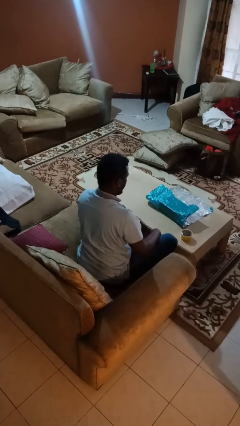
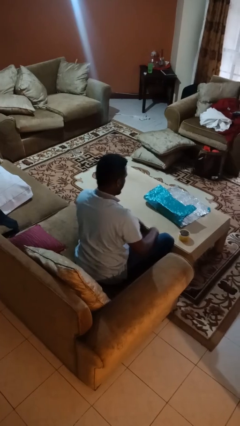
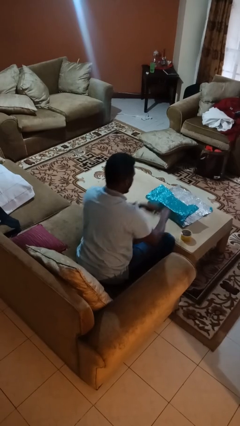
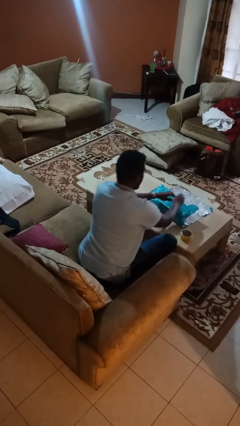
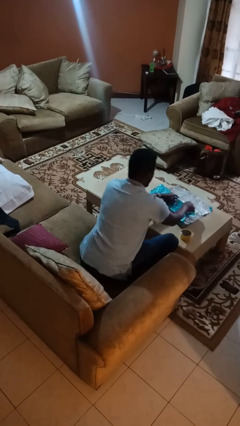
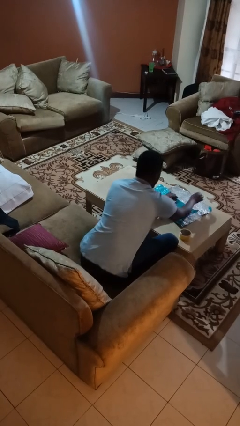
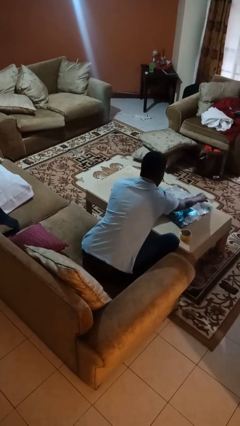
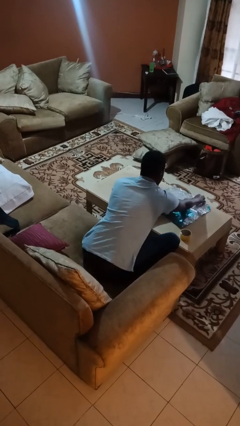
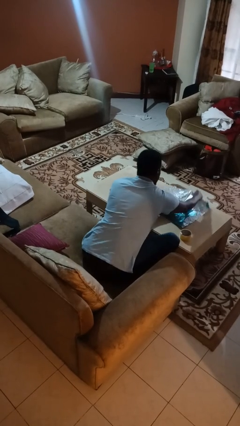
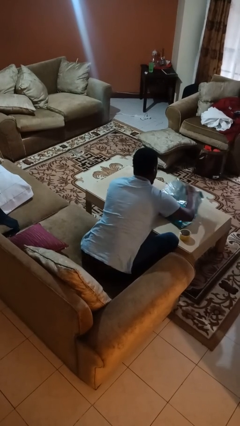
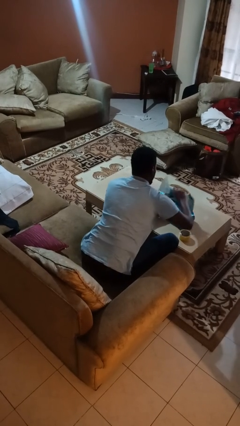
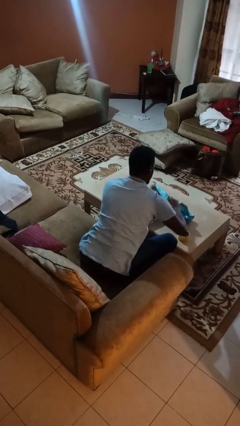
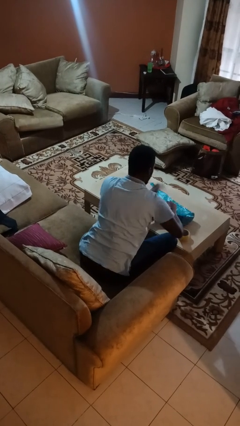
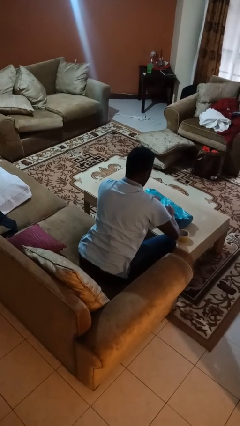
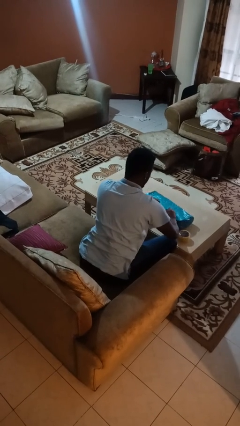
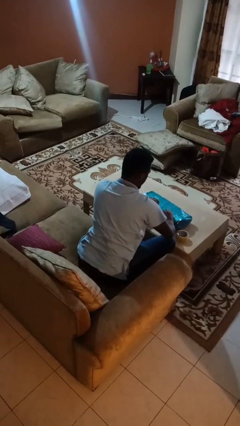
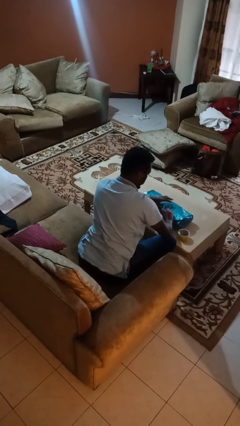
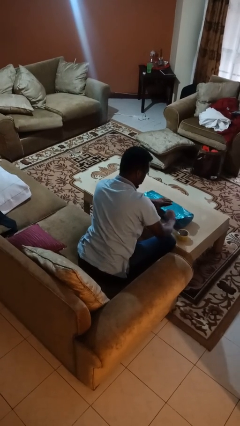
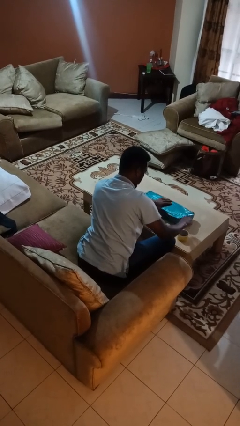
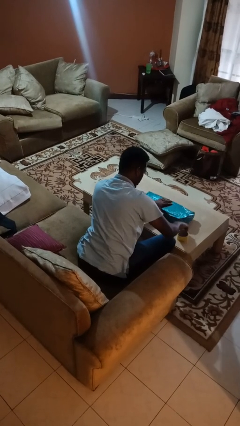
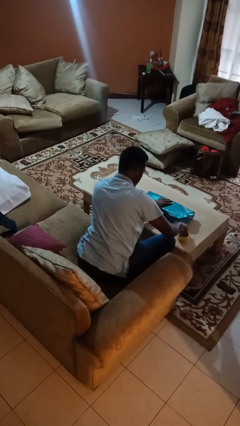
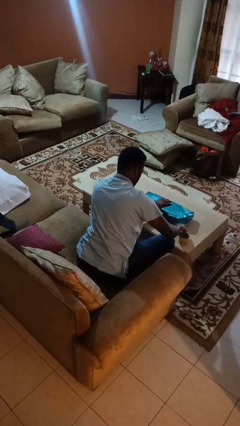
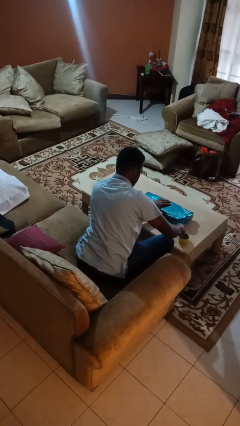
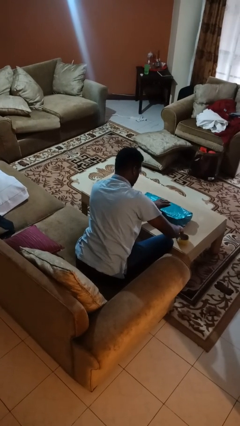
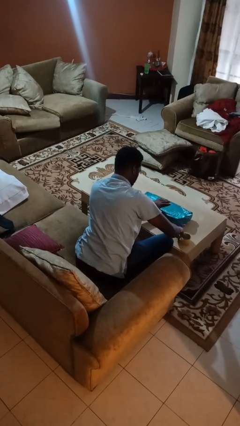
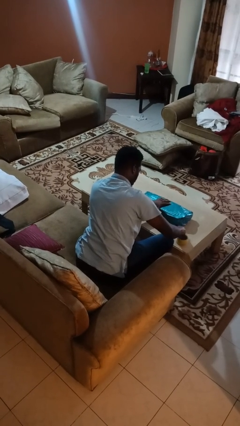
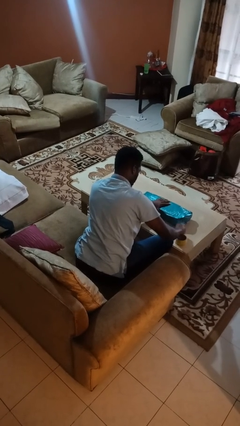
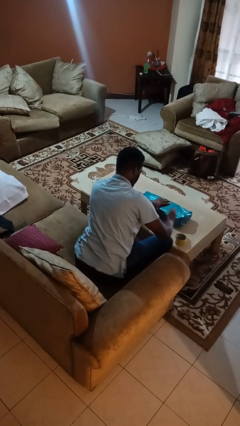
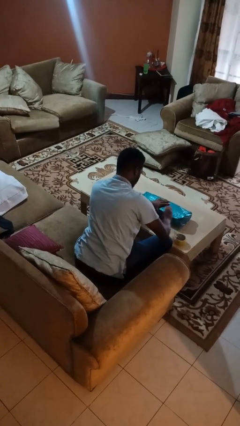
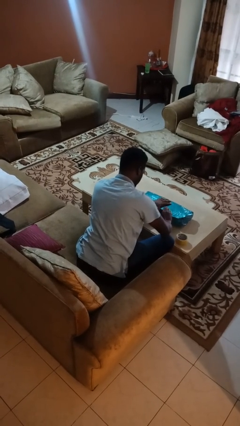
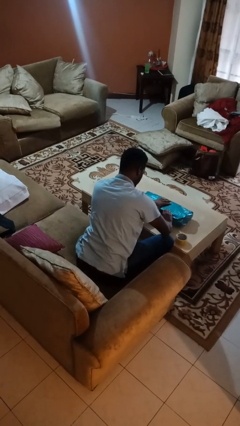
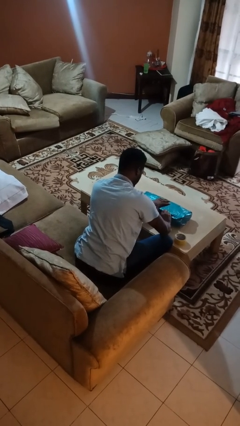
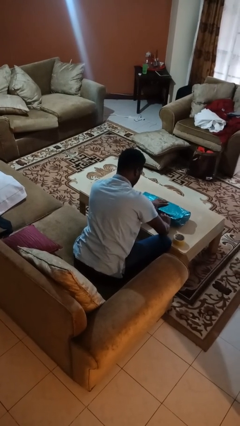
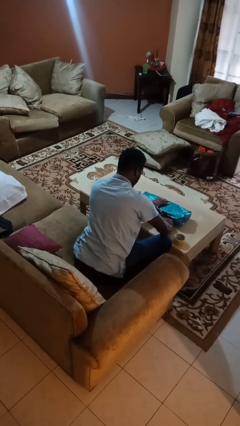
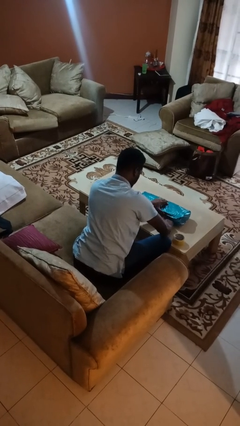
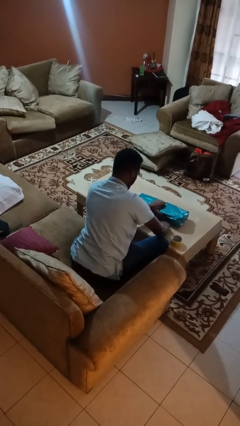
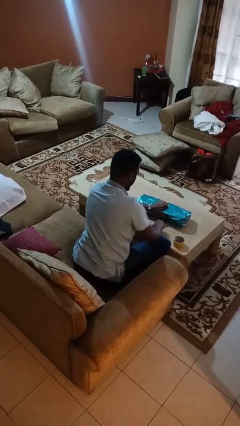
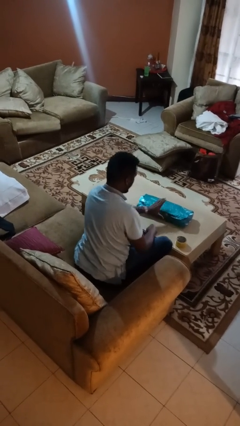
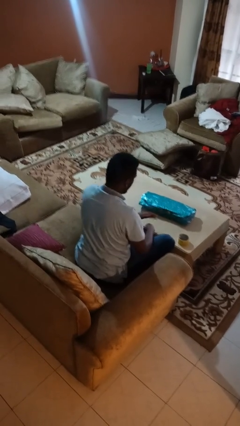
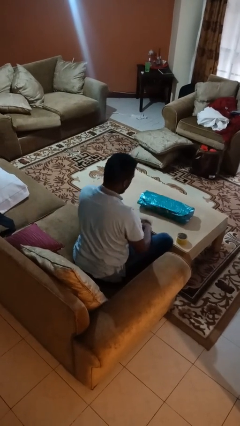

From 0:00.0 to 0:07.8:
person wraps box

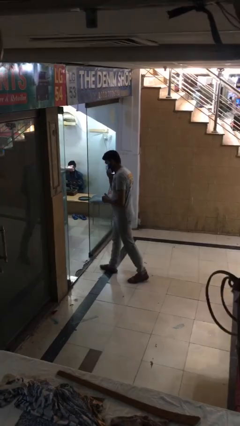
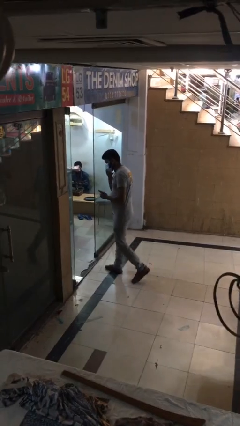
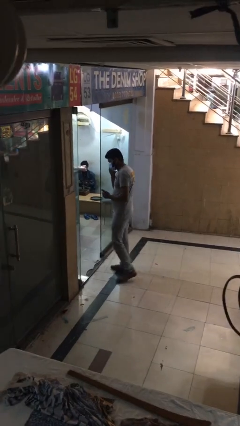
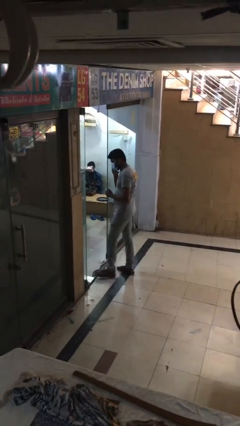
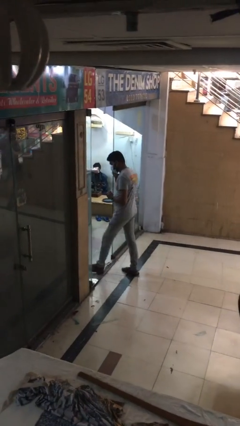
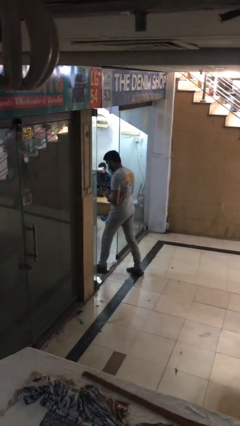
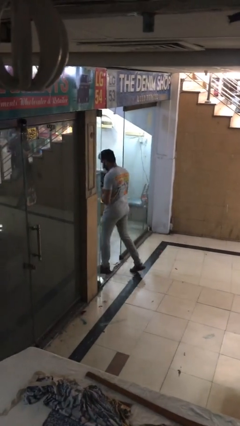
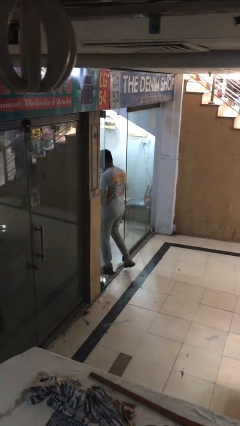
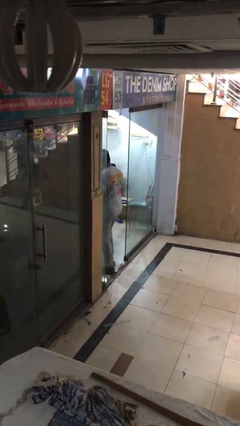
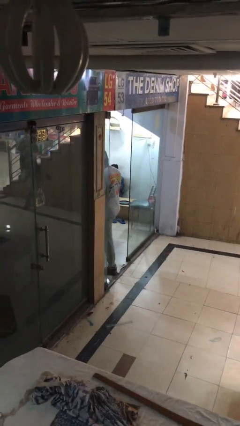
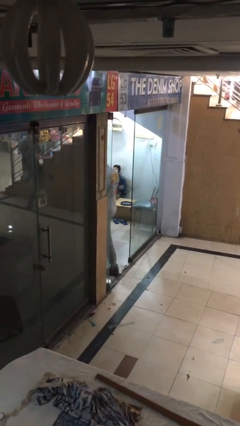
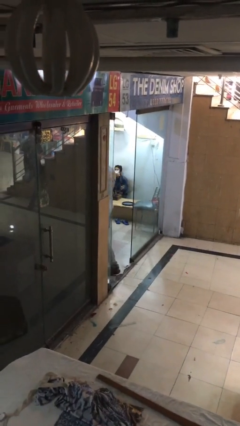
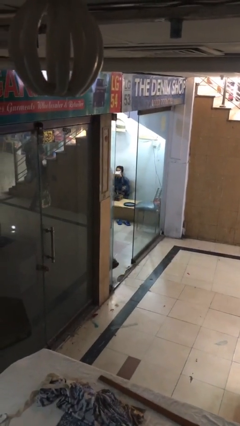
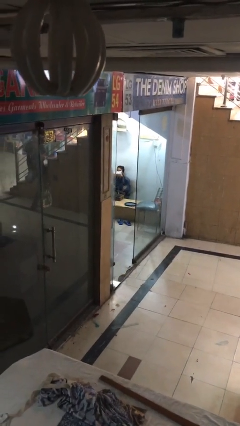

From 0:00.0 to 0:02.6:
person exits scene through structure

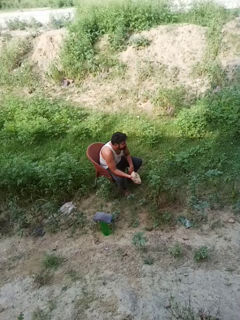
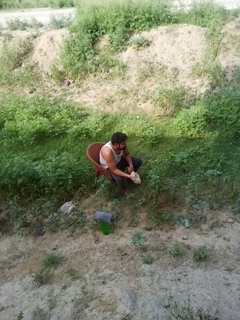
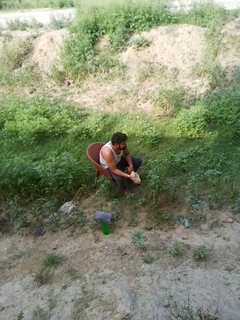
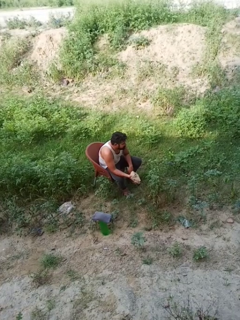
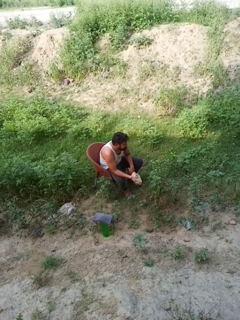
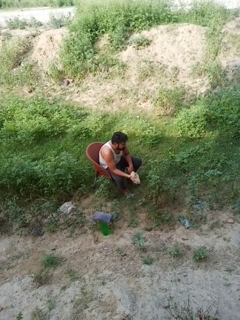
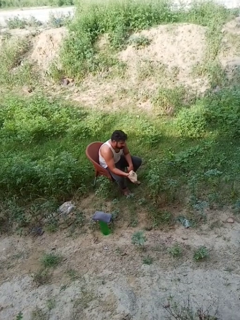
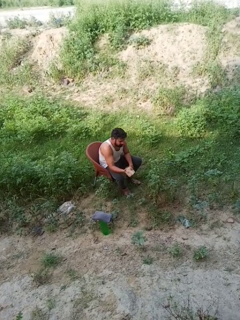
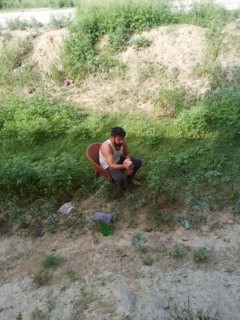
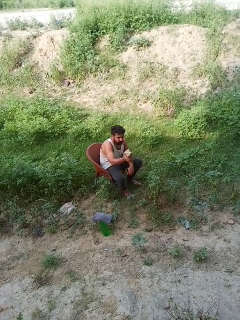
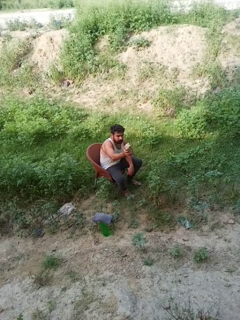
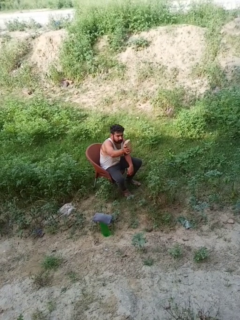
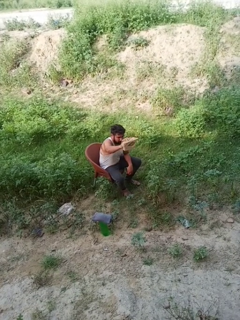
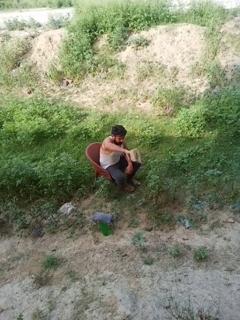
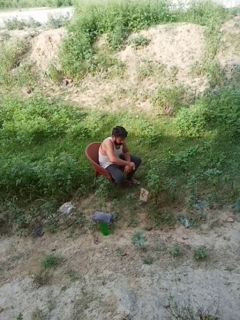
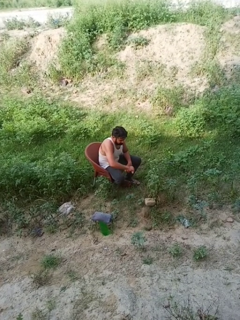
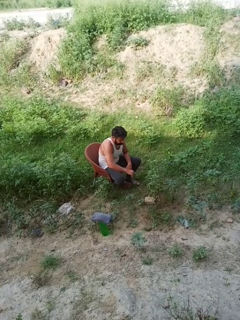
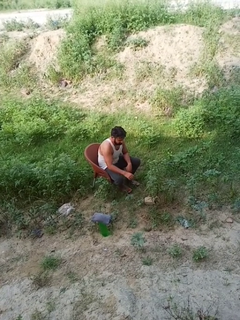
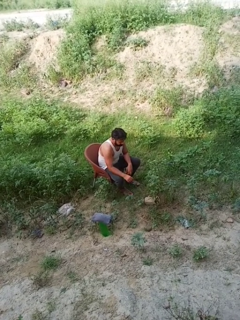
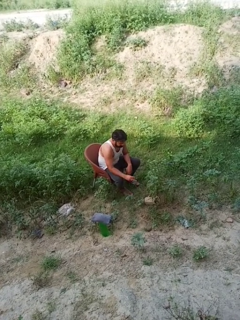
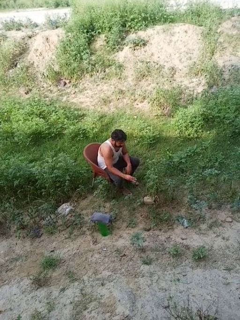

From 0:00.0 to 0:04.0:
person throws object to ground

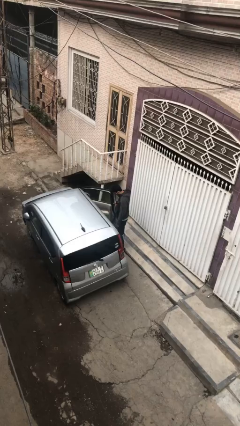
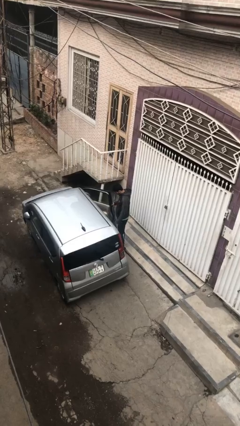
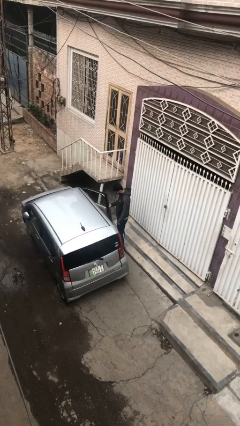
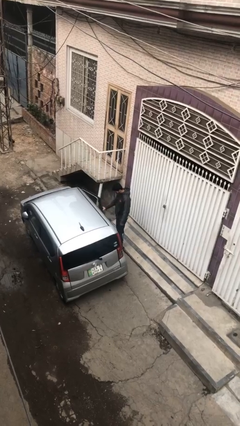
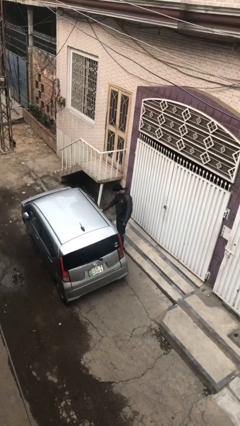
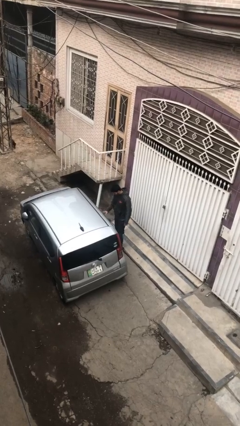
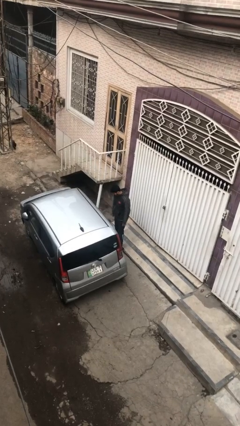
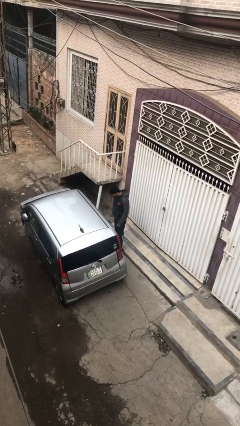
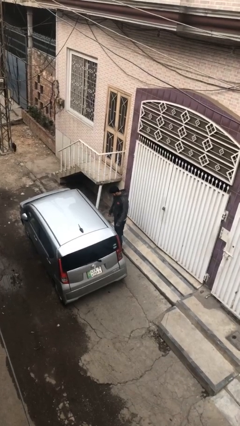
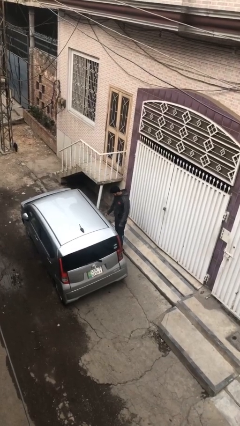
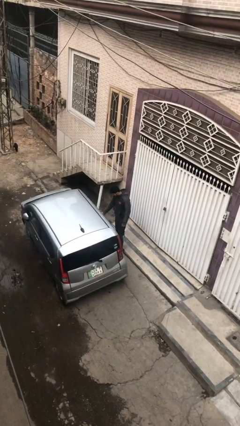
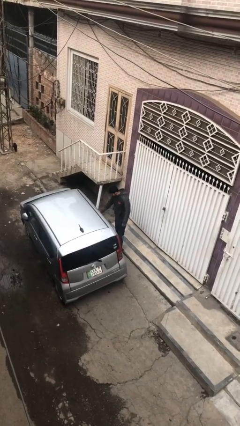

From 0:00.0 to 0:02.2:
person closes car door

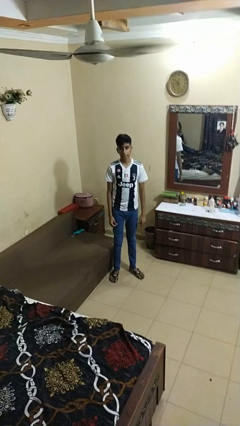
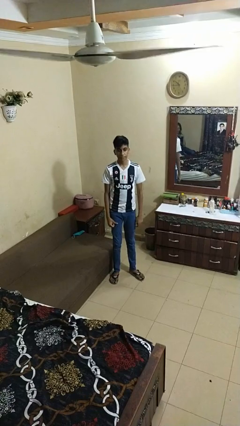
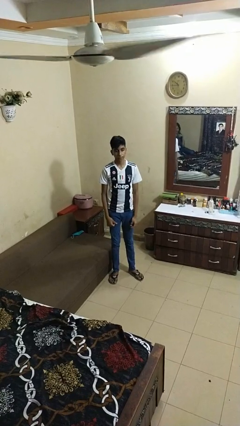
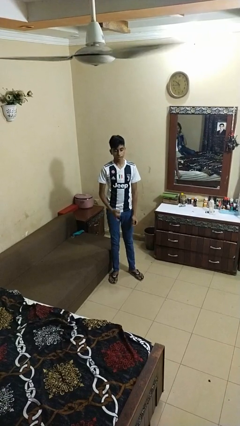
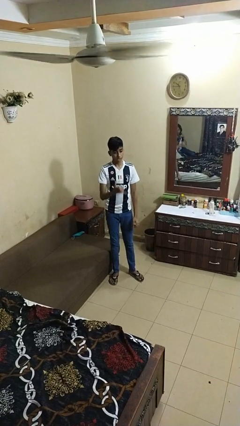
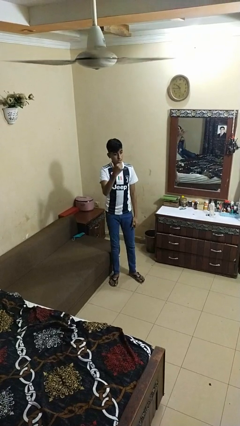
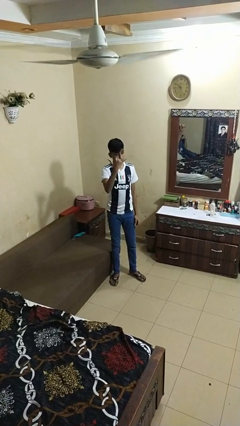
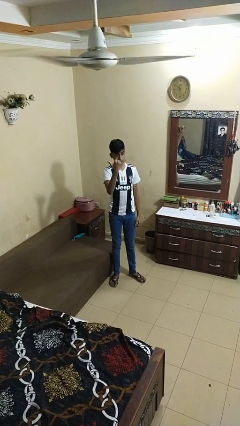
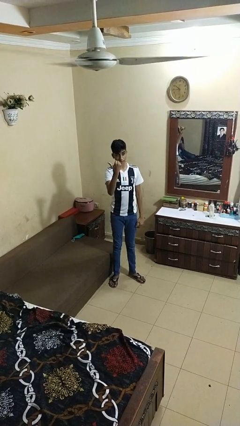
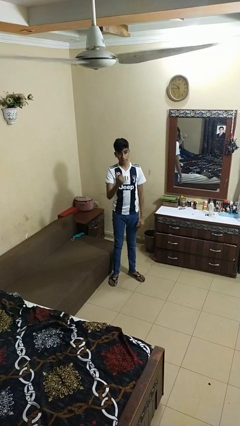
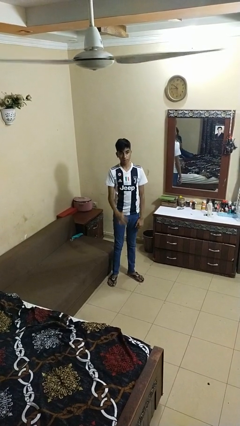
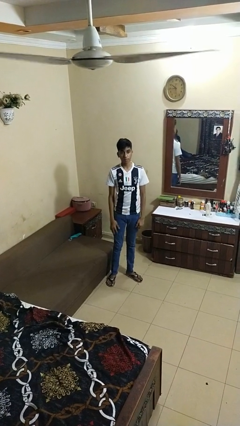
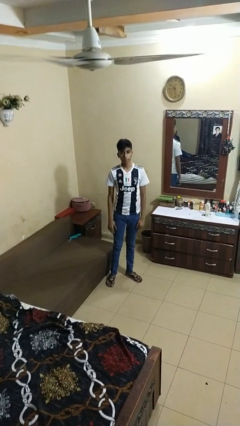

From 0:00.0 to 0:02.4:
person gestures hang loose
